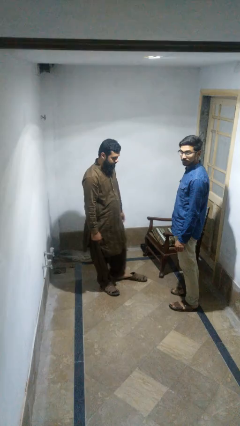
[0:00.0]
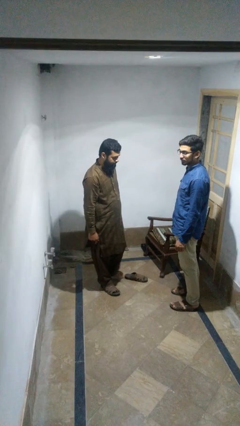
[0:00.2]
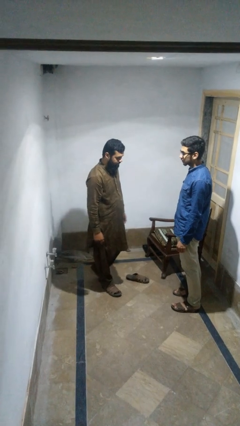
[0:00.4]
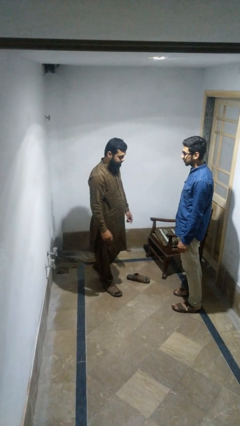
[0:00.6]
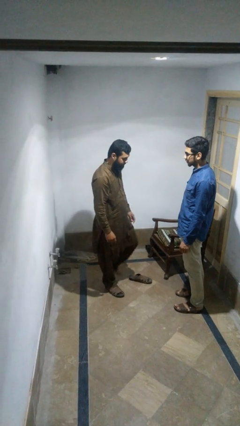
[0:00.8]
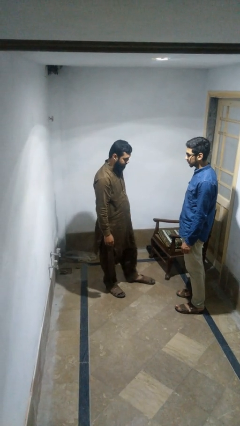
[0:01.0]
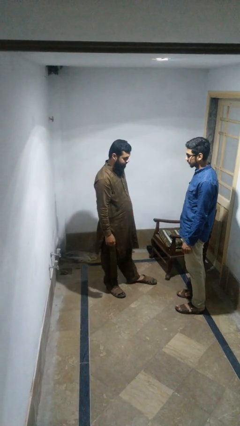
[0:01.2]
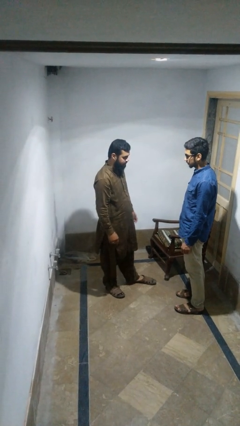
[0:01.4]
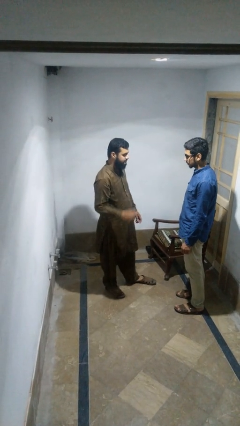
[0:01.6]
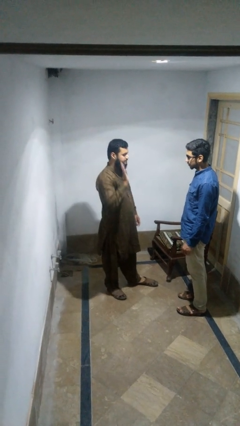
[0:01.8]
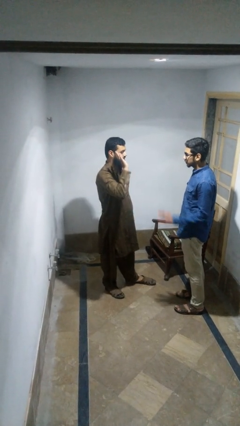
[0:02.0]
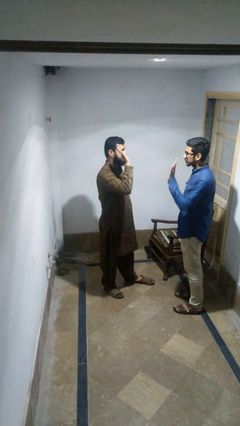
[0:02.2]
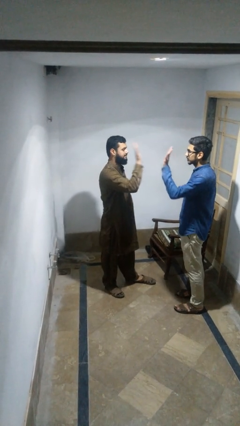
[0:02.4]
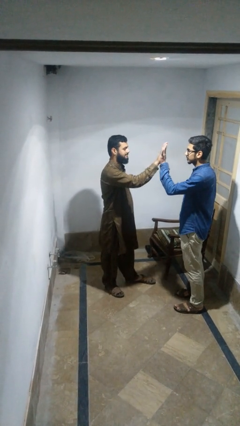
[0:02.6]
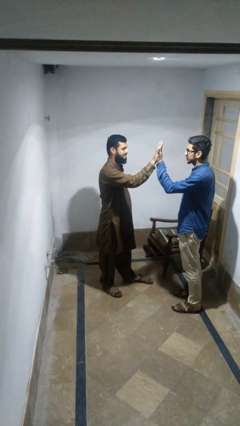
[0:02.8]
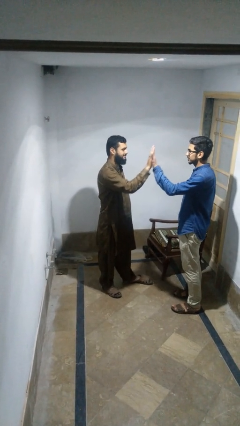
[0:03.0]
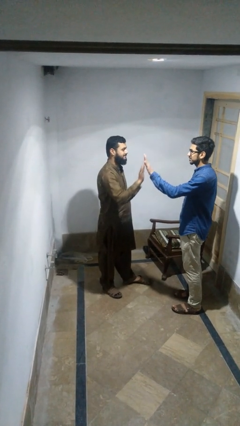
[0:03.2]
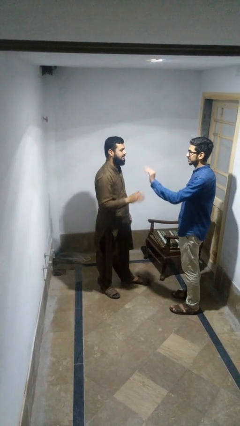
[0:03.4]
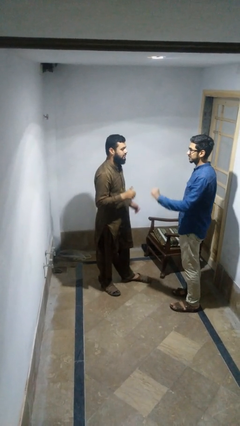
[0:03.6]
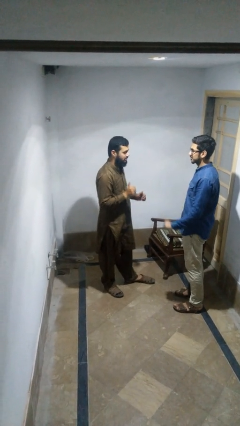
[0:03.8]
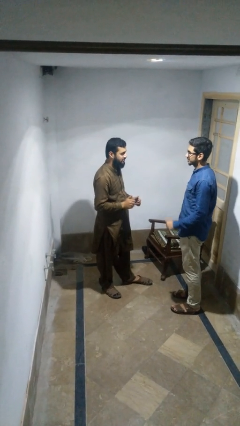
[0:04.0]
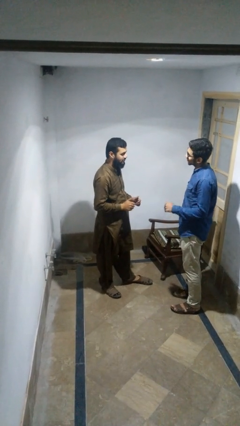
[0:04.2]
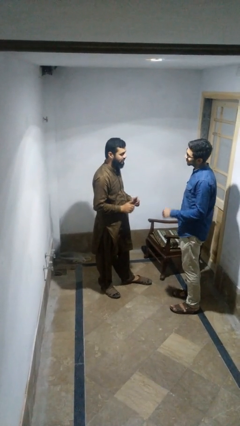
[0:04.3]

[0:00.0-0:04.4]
person highfives hand

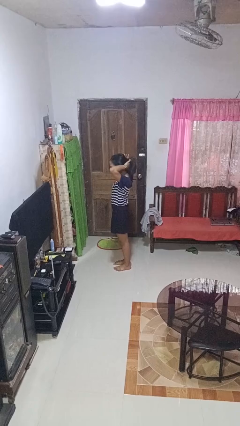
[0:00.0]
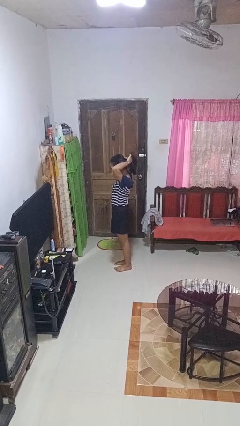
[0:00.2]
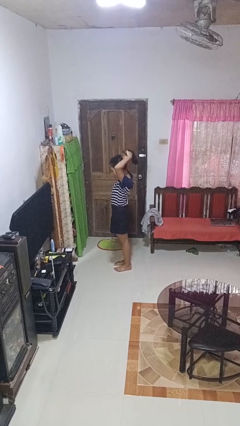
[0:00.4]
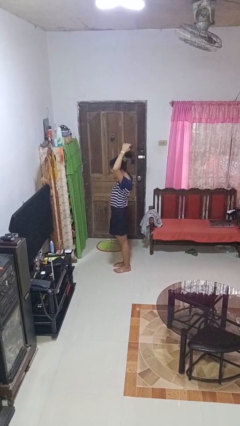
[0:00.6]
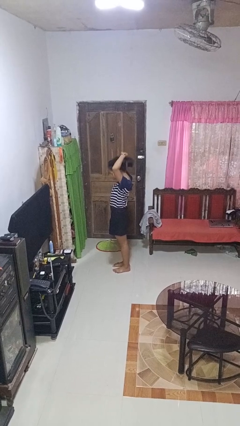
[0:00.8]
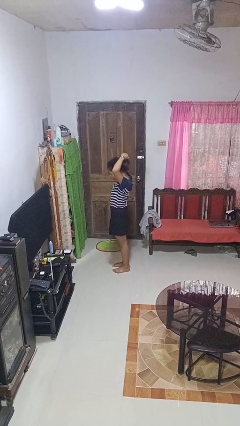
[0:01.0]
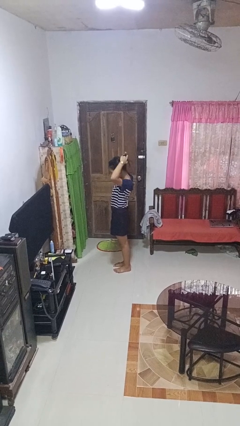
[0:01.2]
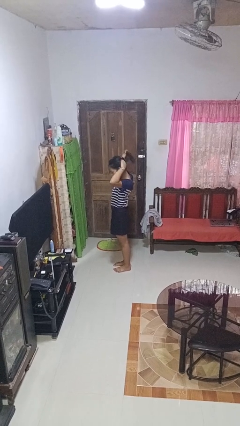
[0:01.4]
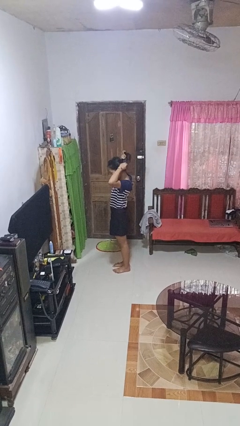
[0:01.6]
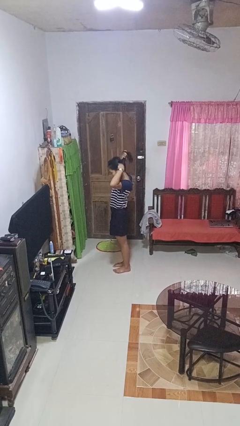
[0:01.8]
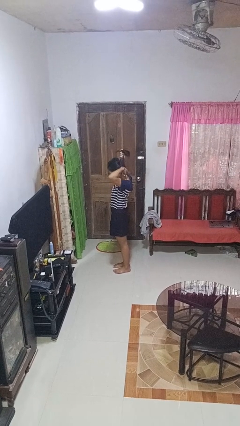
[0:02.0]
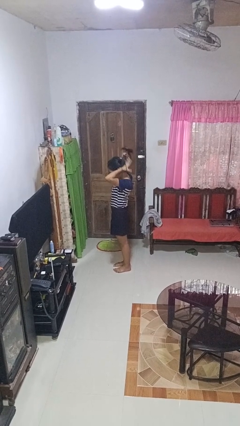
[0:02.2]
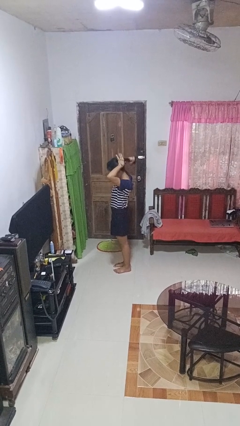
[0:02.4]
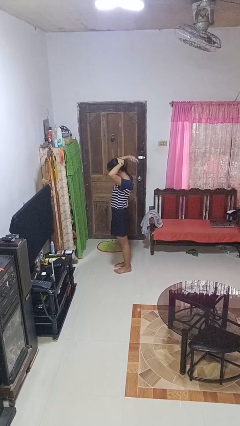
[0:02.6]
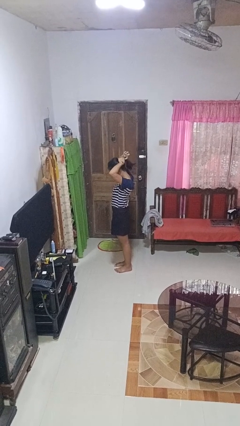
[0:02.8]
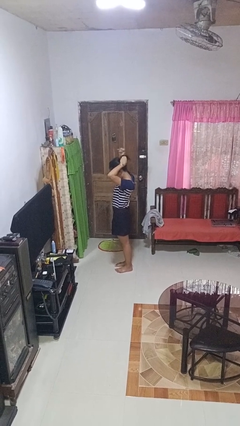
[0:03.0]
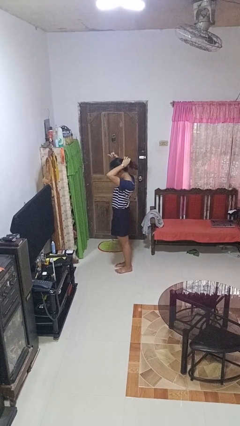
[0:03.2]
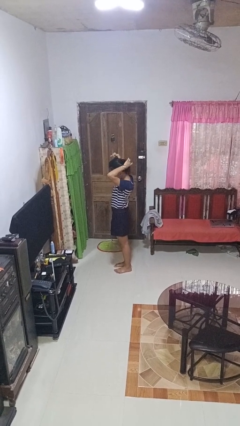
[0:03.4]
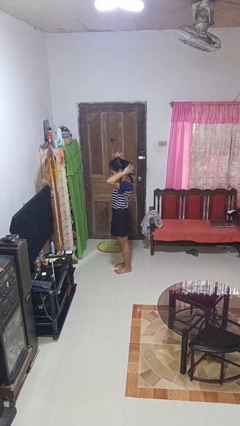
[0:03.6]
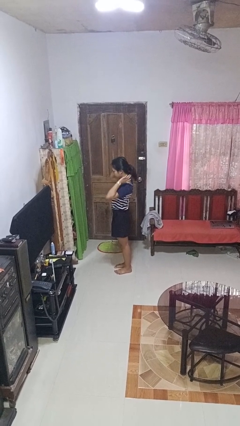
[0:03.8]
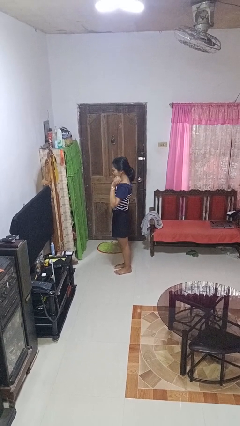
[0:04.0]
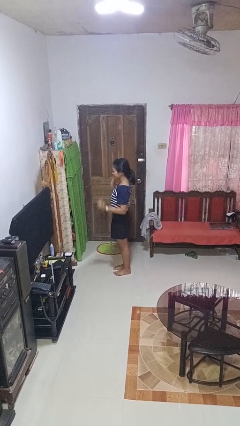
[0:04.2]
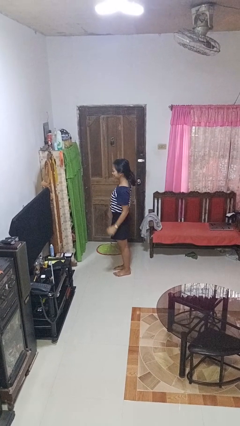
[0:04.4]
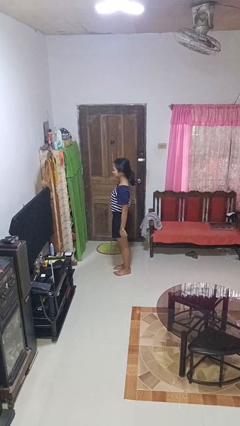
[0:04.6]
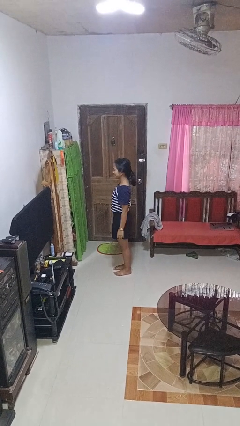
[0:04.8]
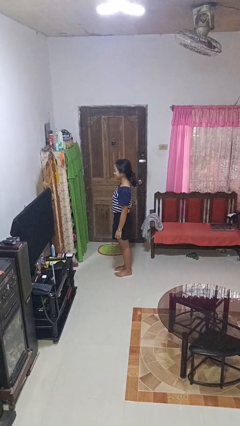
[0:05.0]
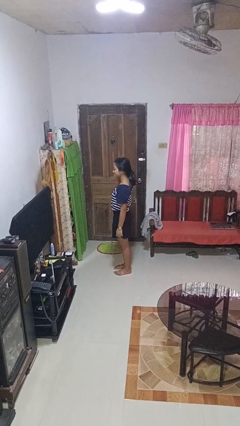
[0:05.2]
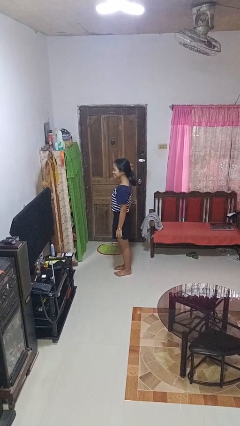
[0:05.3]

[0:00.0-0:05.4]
person puts hair in ponytail

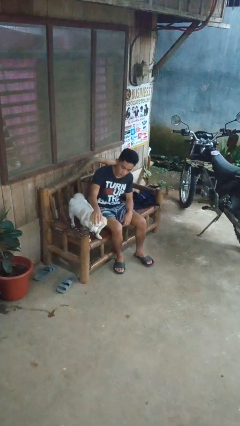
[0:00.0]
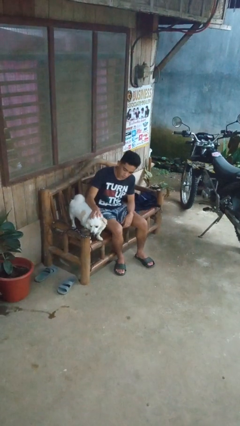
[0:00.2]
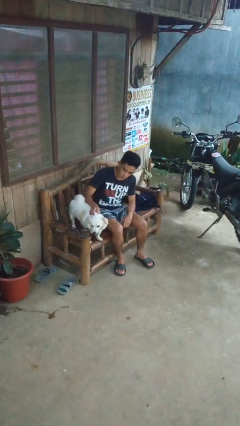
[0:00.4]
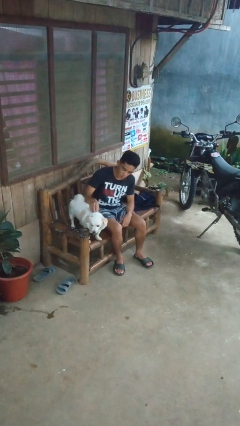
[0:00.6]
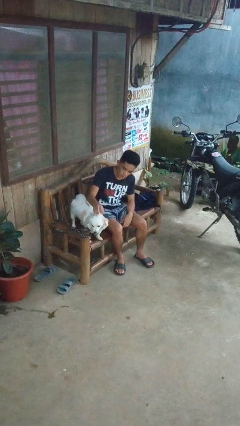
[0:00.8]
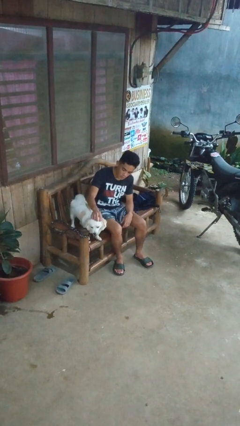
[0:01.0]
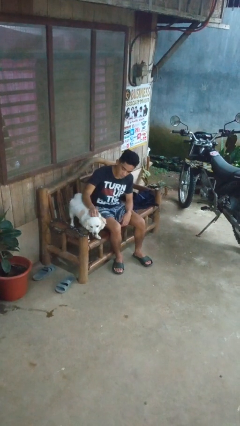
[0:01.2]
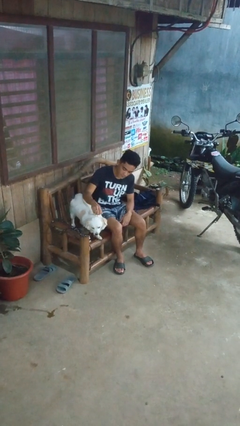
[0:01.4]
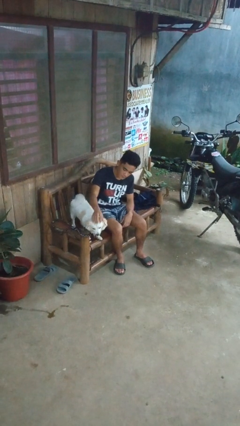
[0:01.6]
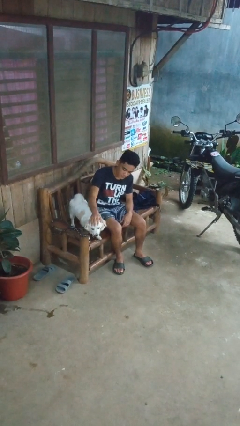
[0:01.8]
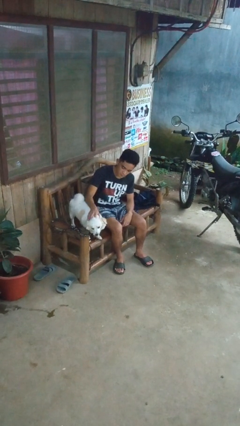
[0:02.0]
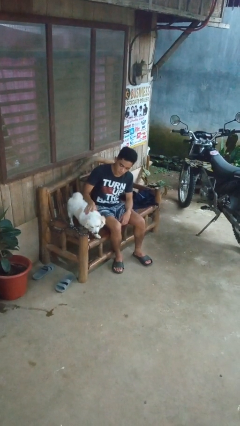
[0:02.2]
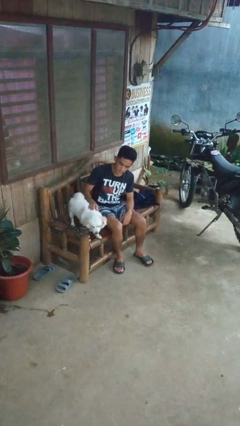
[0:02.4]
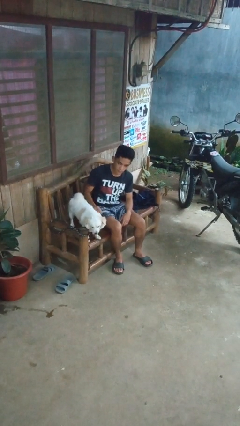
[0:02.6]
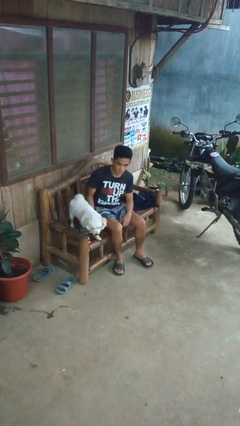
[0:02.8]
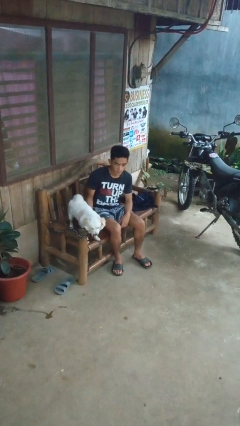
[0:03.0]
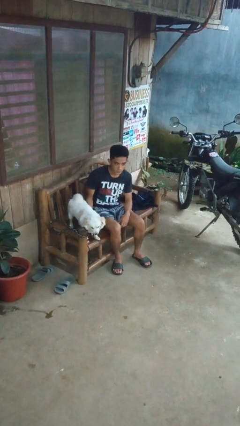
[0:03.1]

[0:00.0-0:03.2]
person pets dog

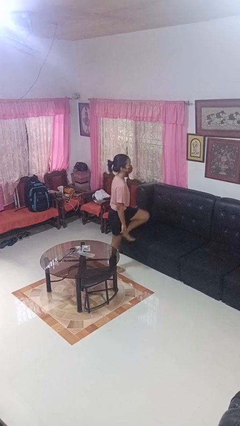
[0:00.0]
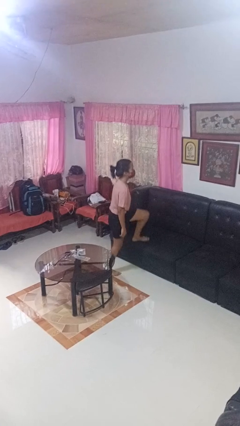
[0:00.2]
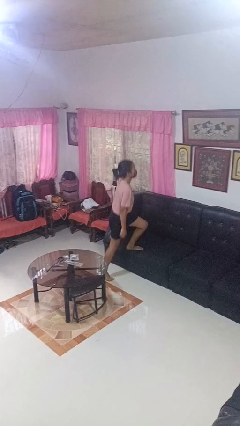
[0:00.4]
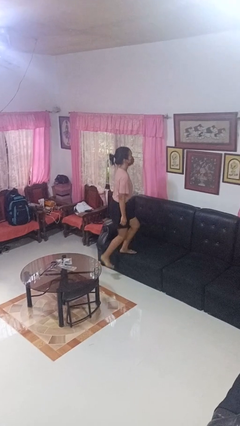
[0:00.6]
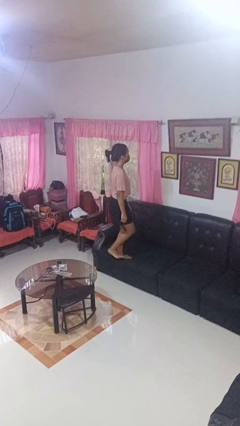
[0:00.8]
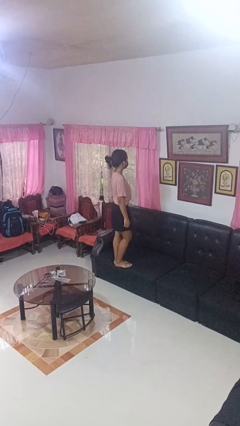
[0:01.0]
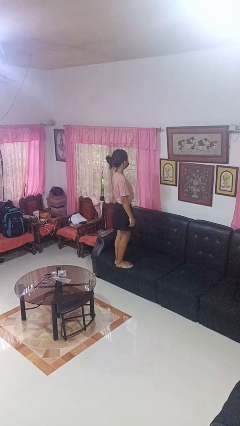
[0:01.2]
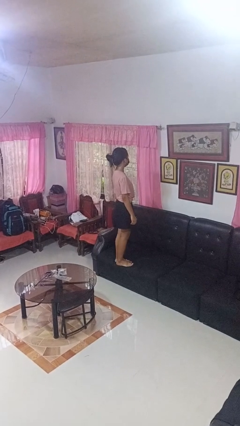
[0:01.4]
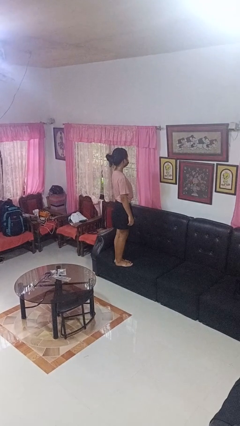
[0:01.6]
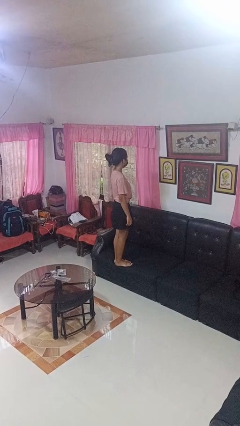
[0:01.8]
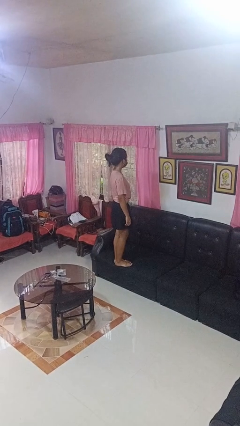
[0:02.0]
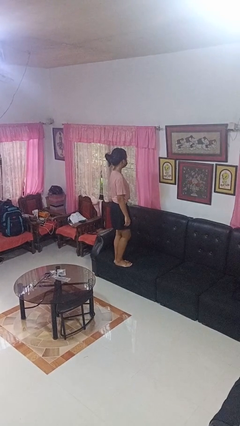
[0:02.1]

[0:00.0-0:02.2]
person climbs on couch

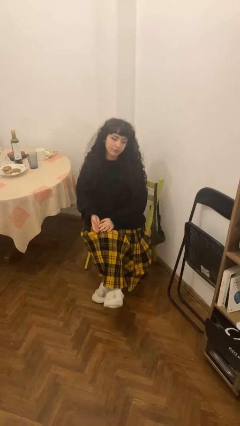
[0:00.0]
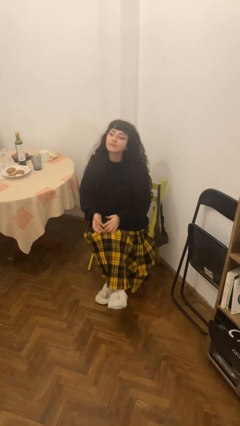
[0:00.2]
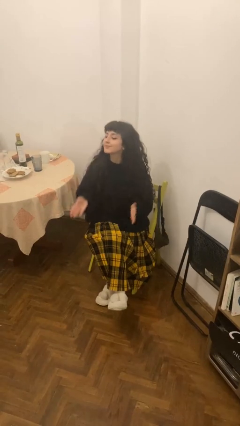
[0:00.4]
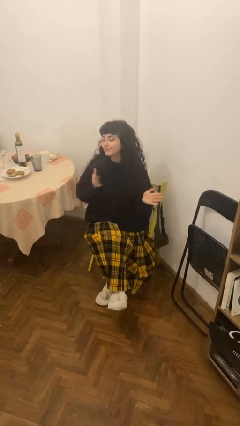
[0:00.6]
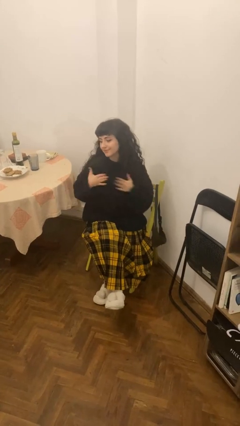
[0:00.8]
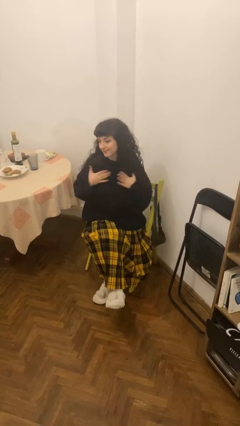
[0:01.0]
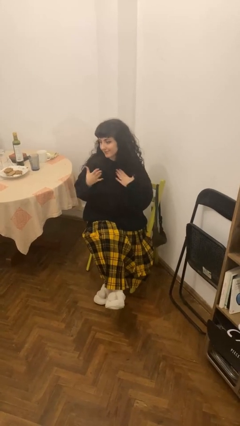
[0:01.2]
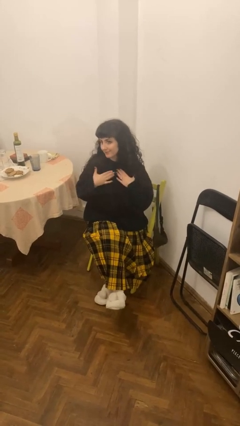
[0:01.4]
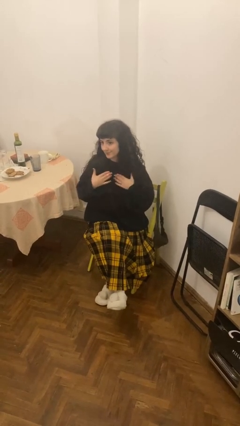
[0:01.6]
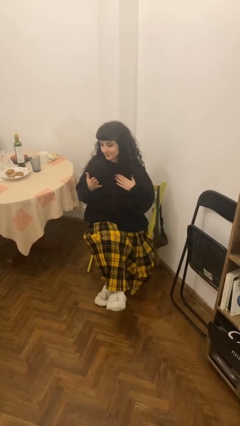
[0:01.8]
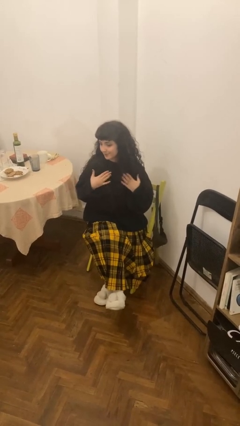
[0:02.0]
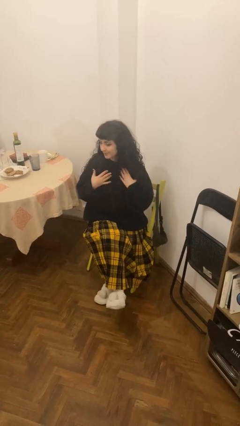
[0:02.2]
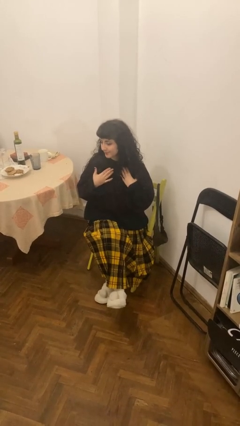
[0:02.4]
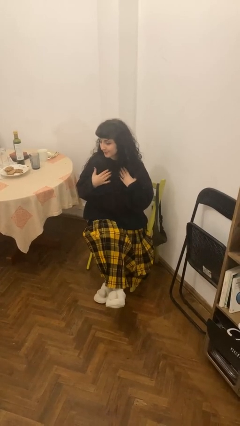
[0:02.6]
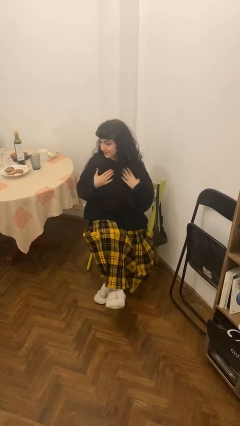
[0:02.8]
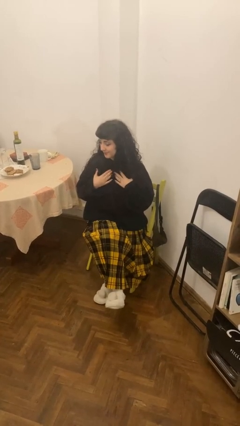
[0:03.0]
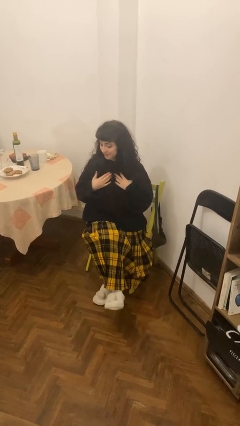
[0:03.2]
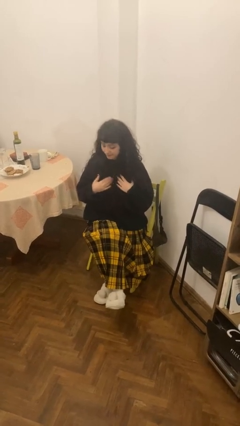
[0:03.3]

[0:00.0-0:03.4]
person drums on chest
